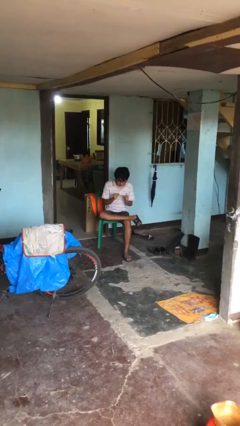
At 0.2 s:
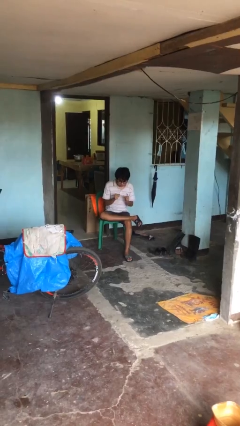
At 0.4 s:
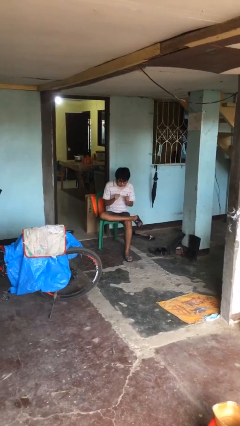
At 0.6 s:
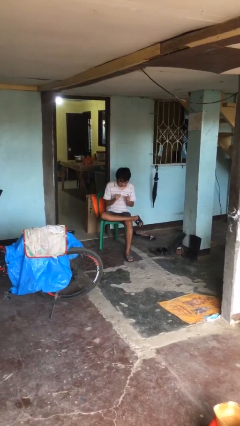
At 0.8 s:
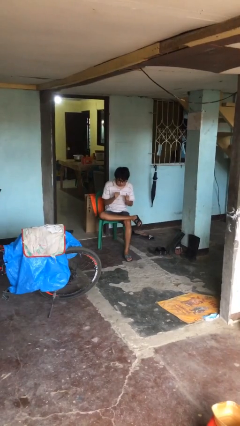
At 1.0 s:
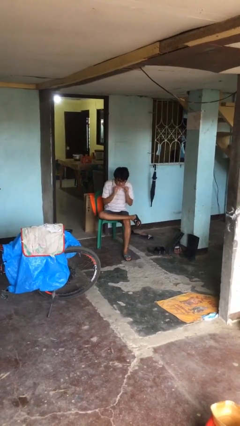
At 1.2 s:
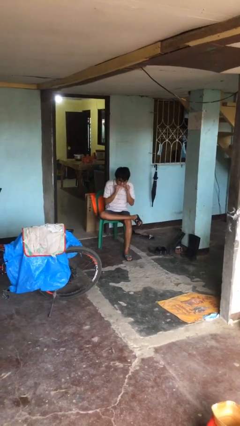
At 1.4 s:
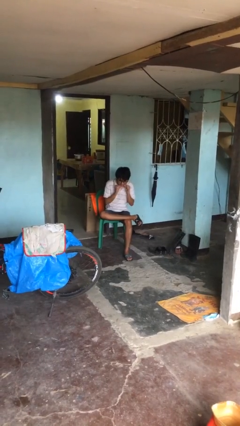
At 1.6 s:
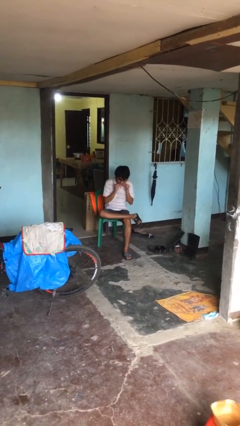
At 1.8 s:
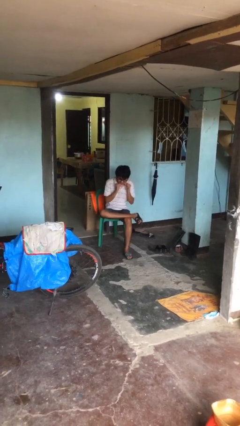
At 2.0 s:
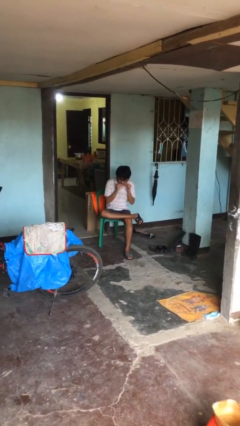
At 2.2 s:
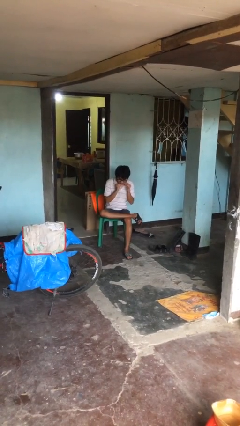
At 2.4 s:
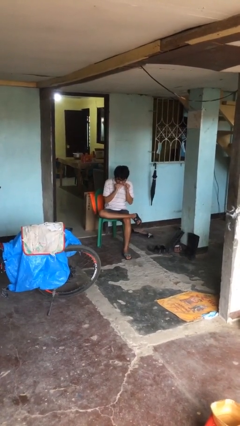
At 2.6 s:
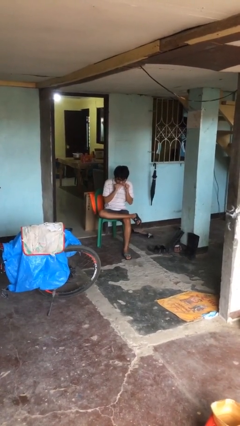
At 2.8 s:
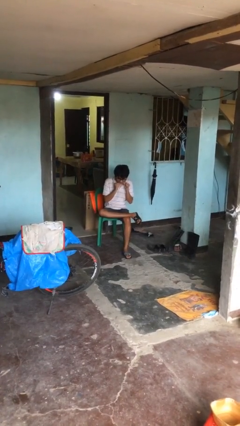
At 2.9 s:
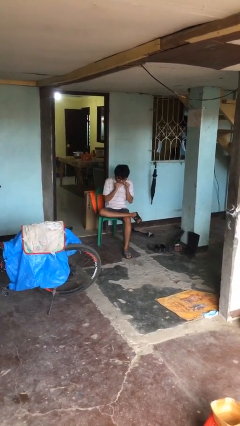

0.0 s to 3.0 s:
person flosses

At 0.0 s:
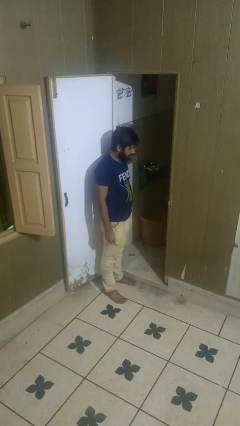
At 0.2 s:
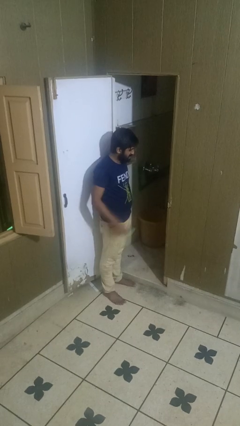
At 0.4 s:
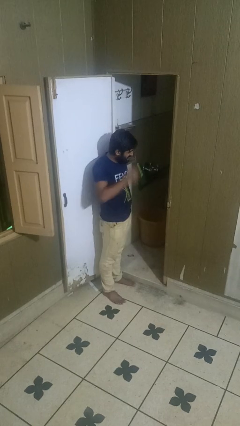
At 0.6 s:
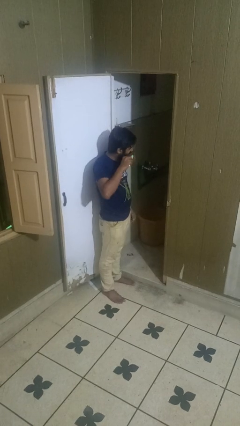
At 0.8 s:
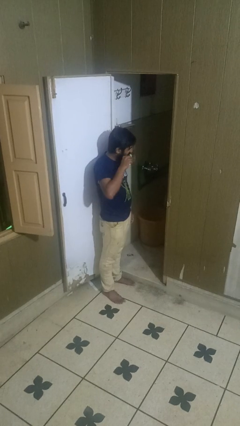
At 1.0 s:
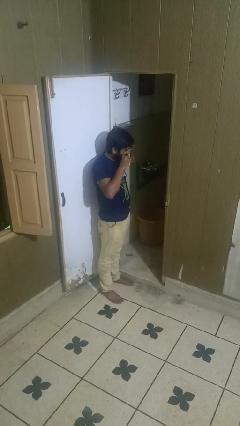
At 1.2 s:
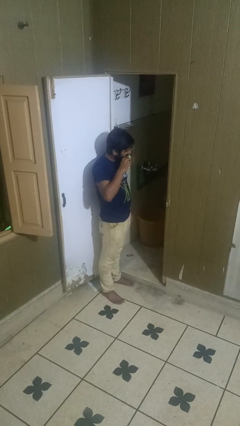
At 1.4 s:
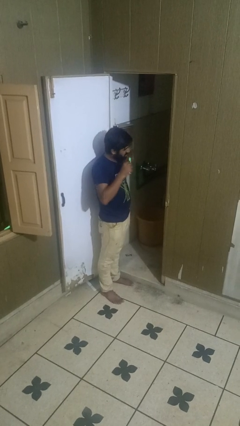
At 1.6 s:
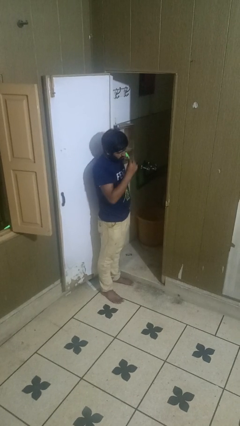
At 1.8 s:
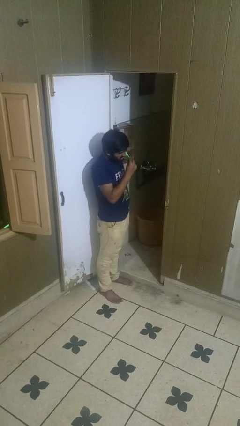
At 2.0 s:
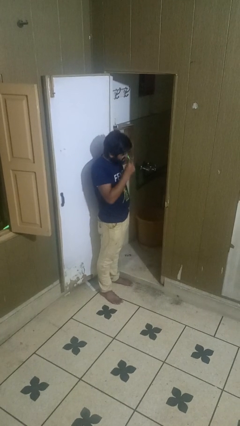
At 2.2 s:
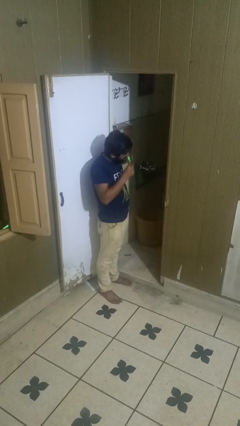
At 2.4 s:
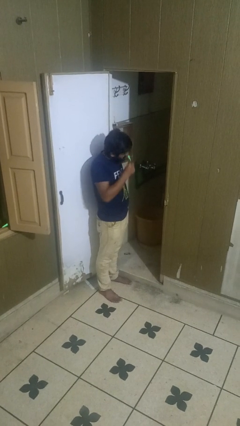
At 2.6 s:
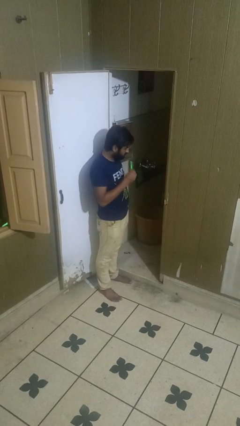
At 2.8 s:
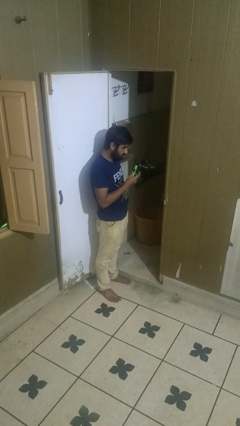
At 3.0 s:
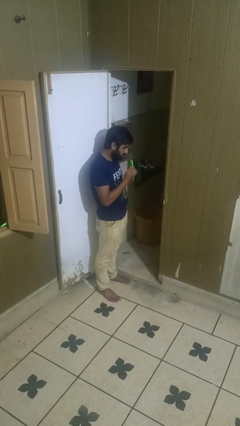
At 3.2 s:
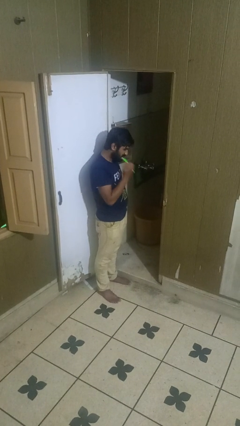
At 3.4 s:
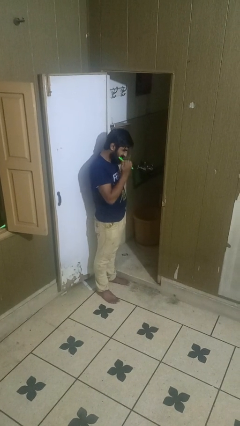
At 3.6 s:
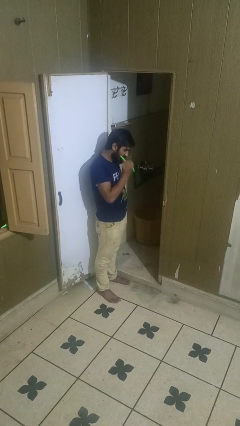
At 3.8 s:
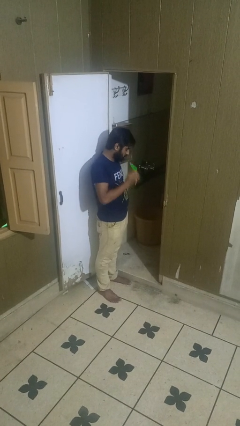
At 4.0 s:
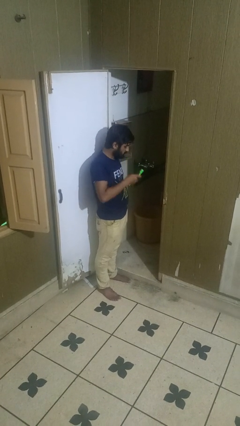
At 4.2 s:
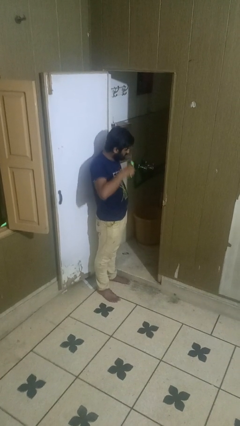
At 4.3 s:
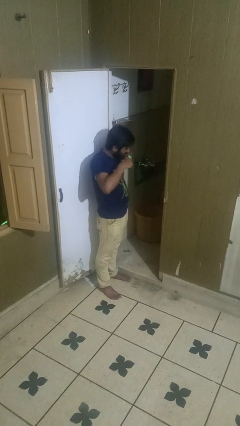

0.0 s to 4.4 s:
person brushes teeth

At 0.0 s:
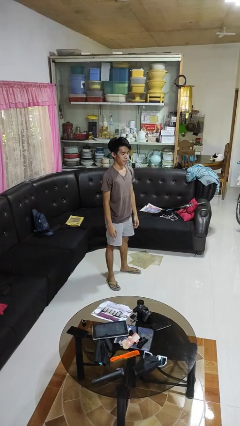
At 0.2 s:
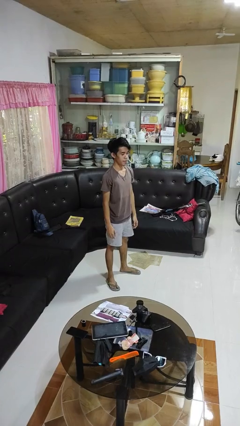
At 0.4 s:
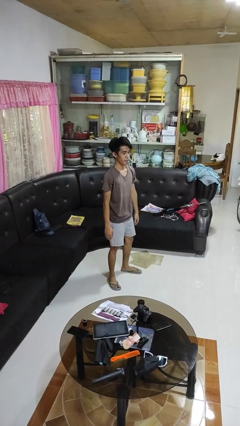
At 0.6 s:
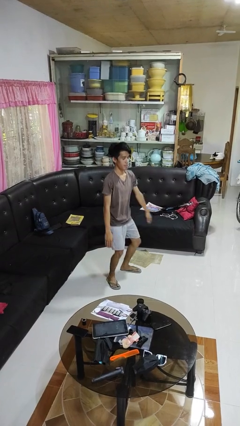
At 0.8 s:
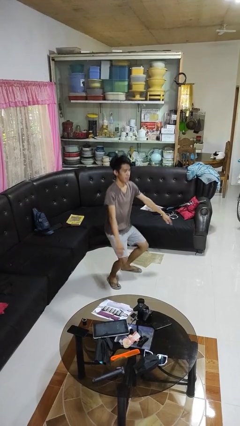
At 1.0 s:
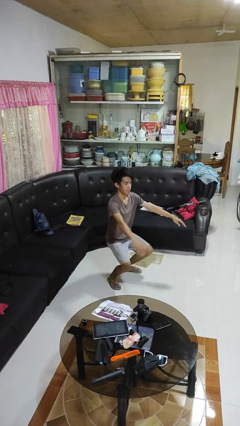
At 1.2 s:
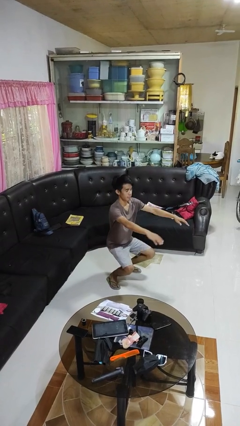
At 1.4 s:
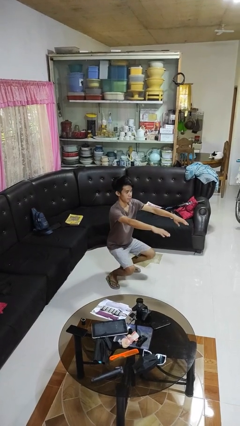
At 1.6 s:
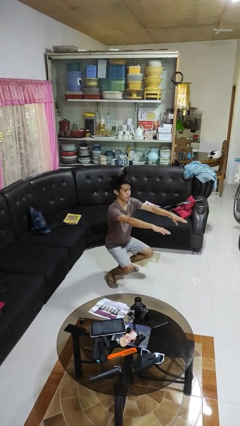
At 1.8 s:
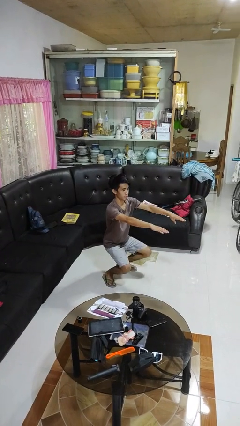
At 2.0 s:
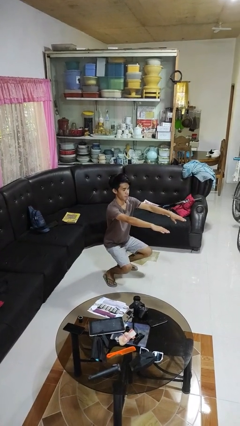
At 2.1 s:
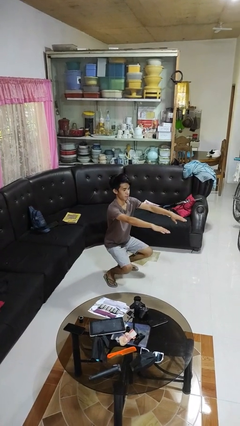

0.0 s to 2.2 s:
person squats

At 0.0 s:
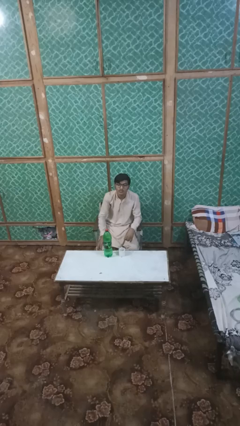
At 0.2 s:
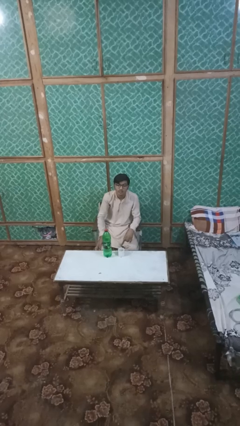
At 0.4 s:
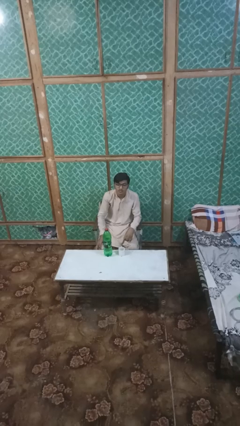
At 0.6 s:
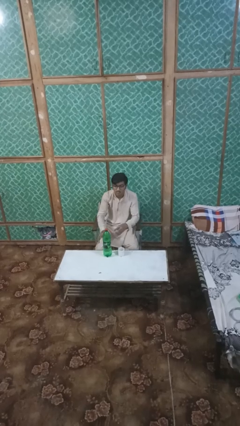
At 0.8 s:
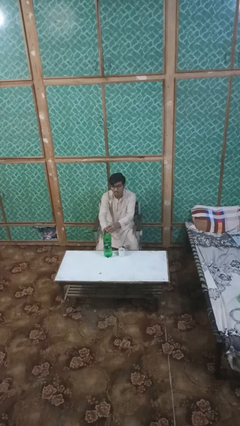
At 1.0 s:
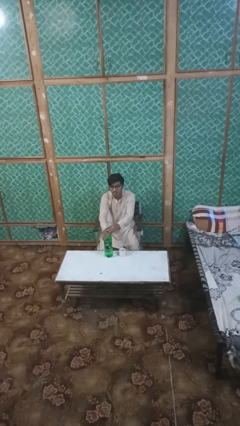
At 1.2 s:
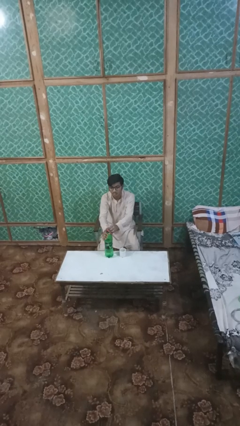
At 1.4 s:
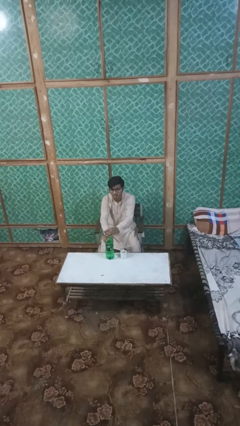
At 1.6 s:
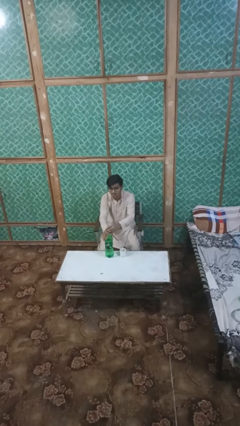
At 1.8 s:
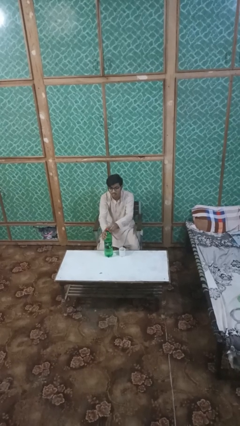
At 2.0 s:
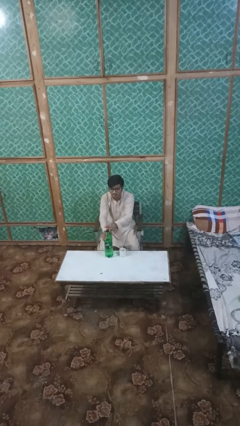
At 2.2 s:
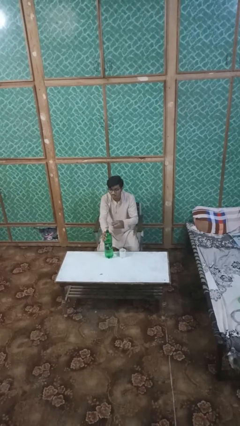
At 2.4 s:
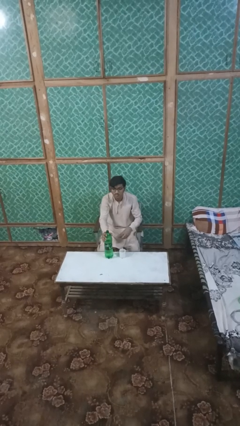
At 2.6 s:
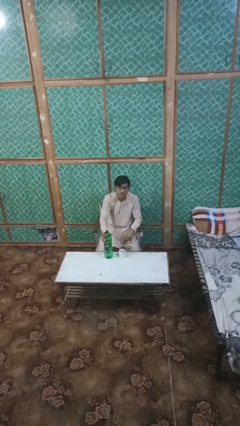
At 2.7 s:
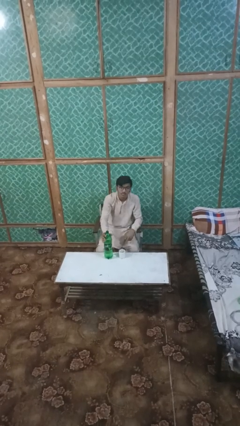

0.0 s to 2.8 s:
person unscrews lid from bottle

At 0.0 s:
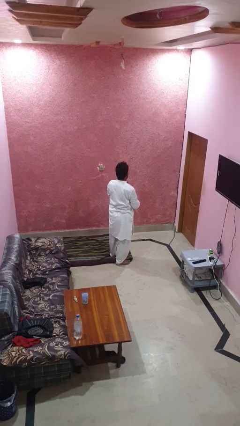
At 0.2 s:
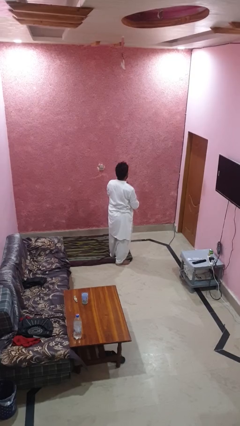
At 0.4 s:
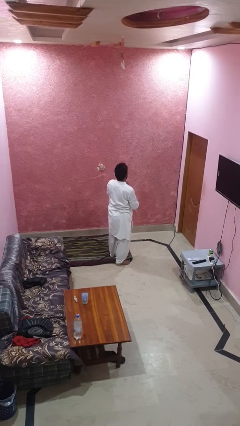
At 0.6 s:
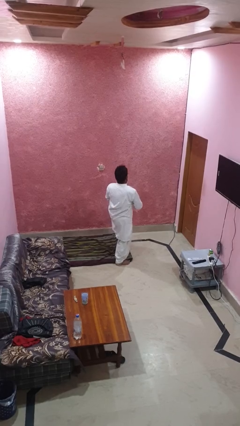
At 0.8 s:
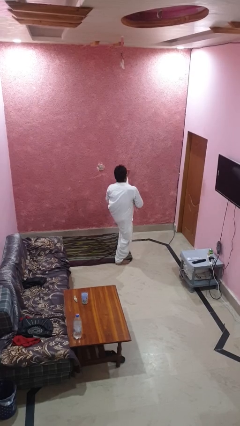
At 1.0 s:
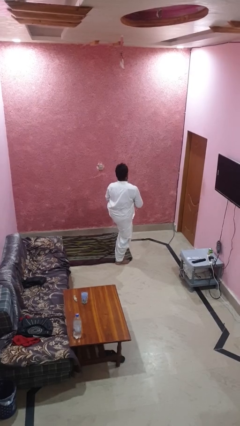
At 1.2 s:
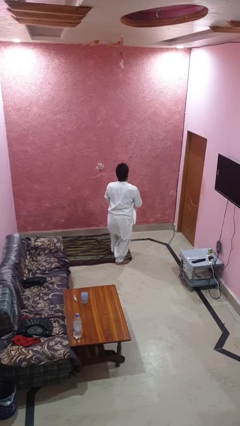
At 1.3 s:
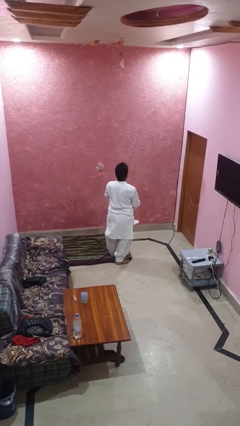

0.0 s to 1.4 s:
person karate kicks

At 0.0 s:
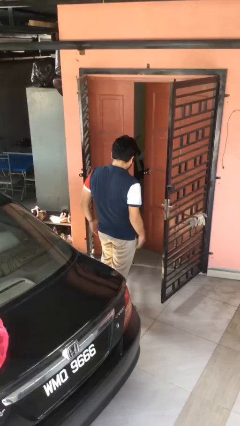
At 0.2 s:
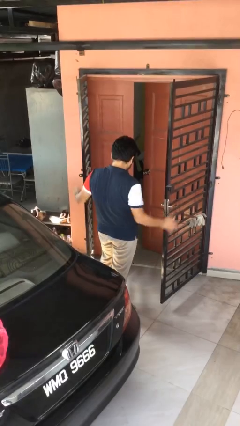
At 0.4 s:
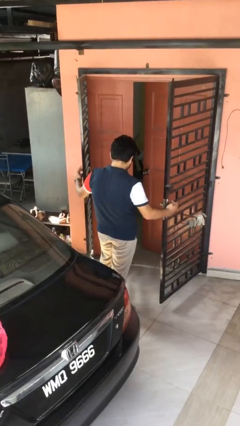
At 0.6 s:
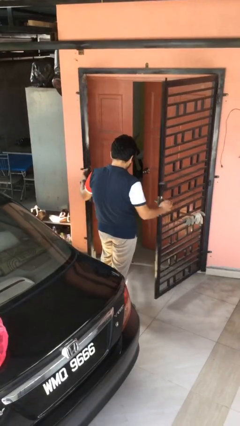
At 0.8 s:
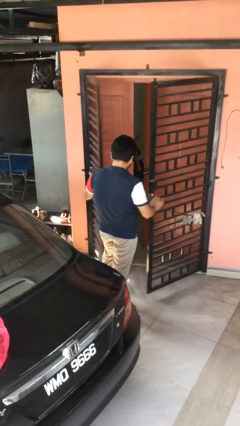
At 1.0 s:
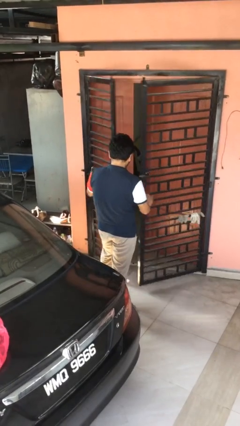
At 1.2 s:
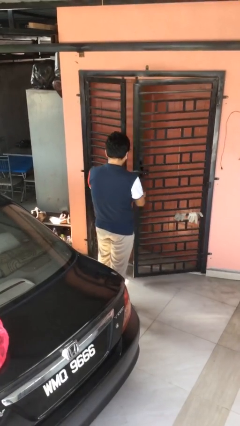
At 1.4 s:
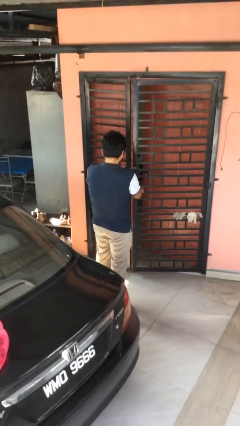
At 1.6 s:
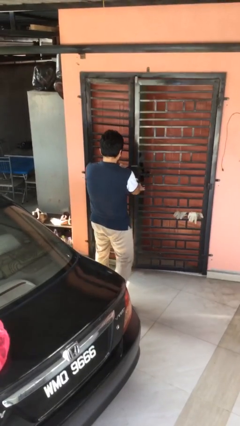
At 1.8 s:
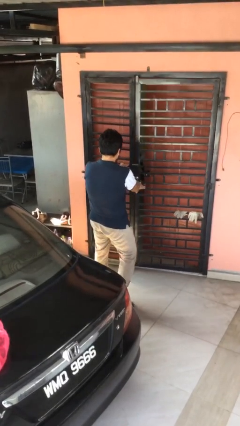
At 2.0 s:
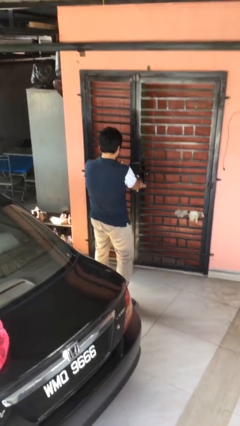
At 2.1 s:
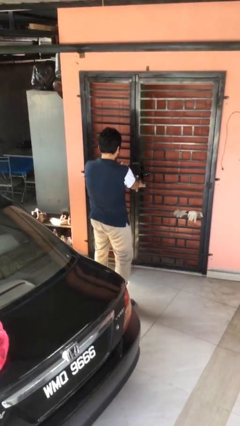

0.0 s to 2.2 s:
person closes gate

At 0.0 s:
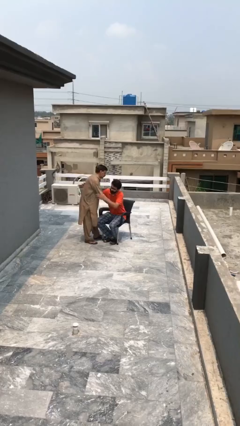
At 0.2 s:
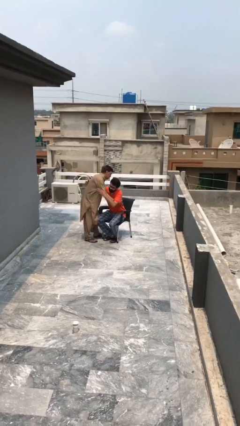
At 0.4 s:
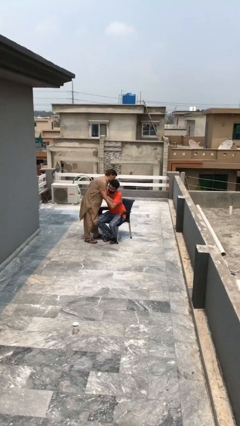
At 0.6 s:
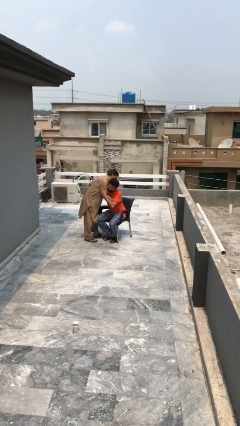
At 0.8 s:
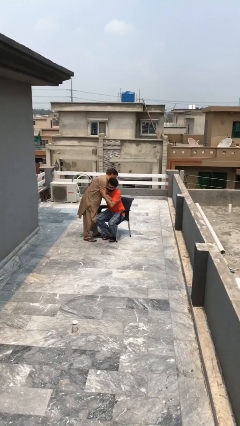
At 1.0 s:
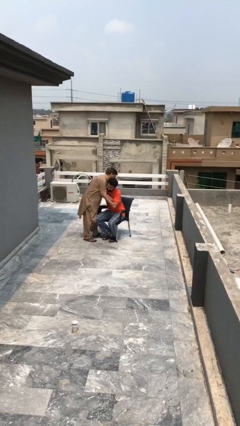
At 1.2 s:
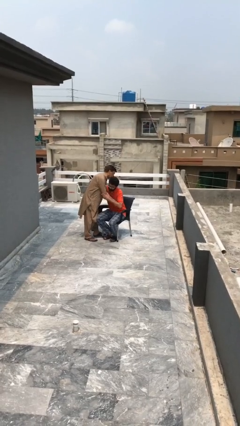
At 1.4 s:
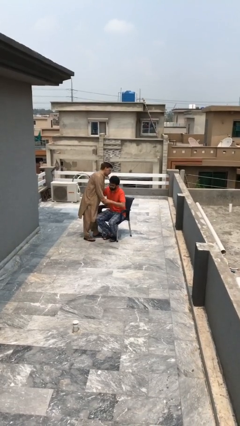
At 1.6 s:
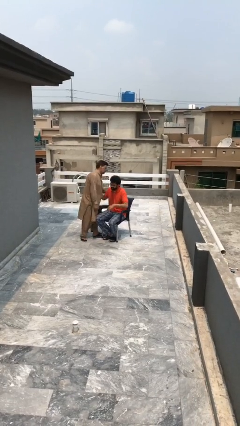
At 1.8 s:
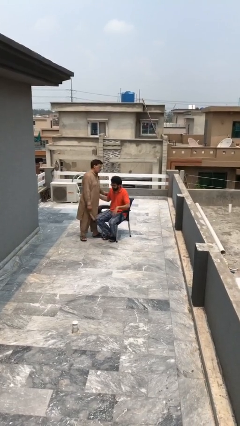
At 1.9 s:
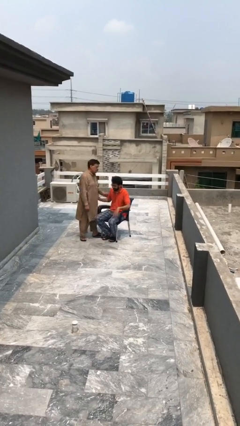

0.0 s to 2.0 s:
person embraces person
